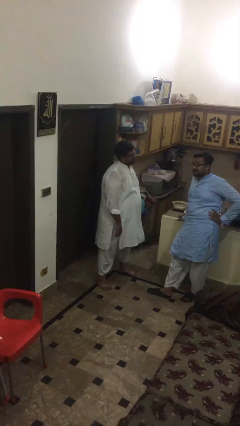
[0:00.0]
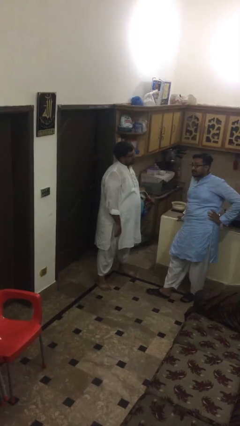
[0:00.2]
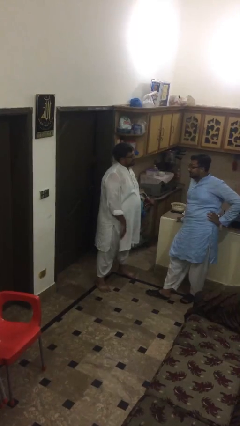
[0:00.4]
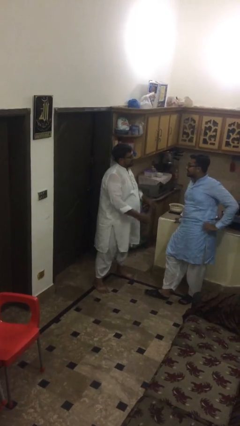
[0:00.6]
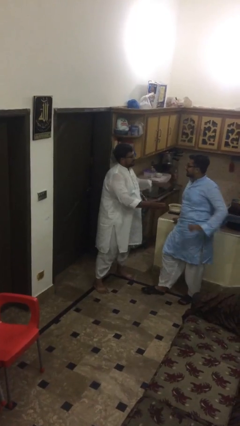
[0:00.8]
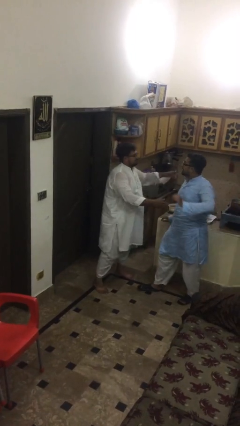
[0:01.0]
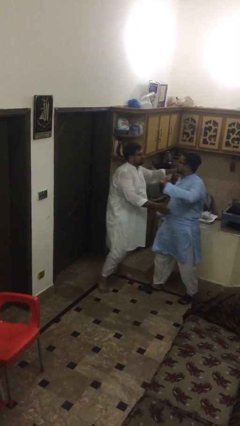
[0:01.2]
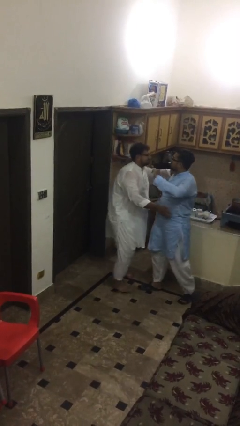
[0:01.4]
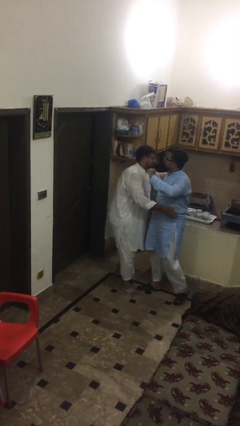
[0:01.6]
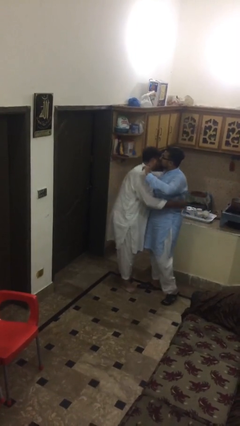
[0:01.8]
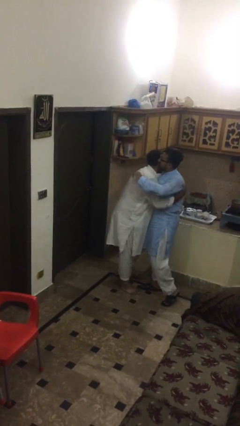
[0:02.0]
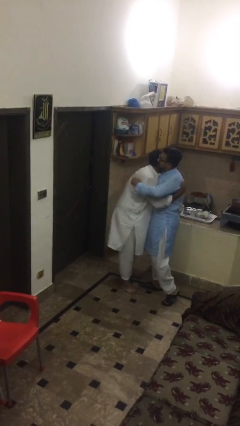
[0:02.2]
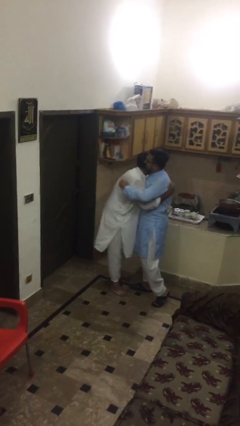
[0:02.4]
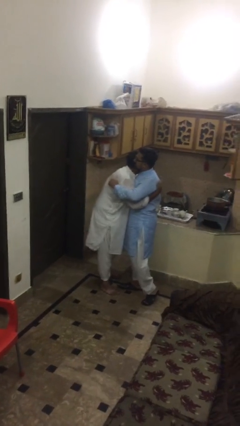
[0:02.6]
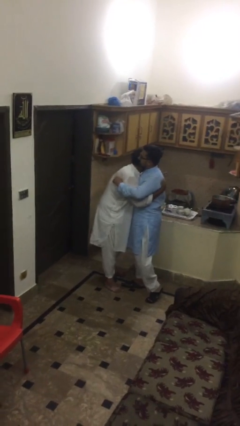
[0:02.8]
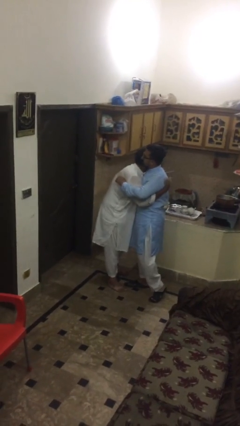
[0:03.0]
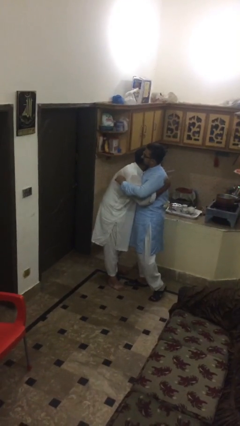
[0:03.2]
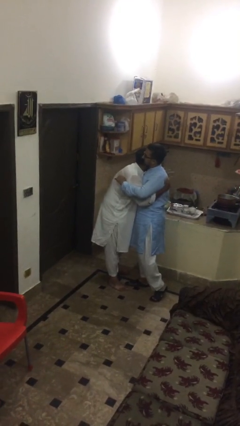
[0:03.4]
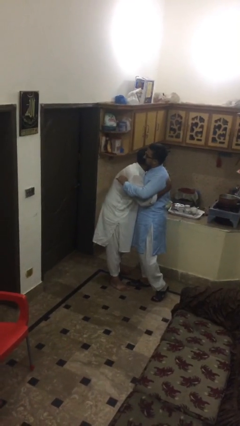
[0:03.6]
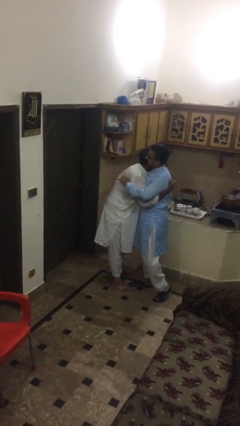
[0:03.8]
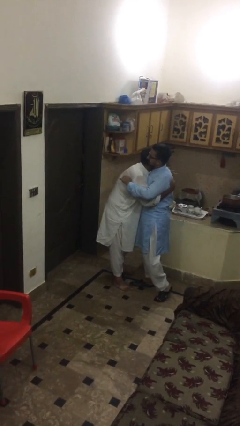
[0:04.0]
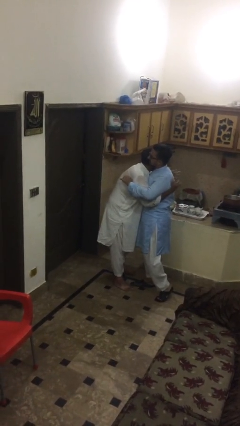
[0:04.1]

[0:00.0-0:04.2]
person embraces person

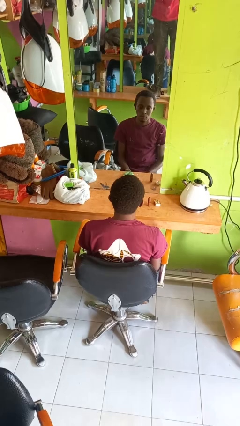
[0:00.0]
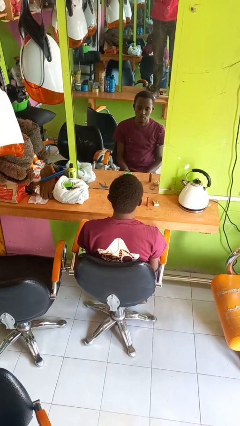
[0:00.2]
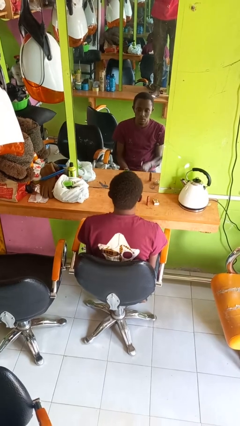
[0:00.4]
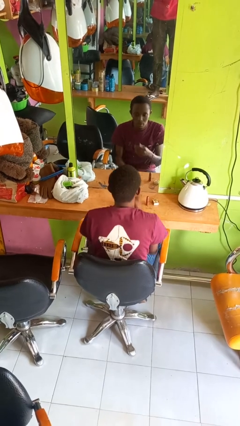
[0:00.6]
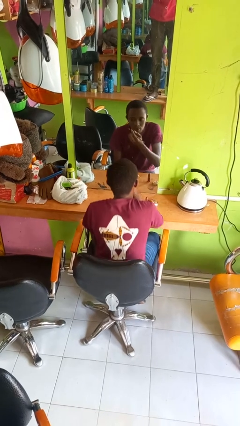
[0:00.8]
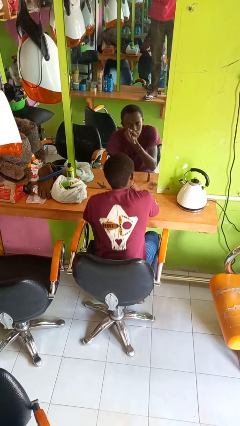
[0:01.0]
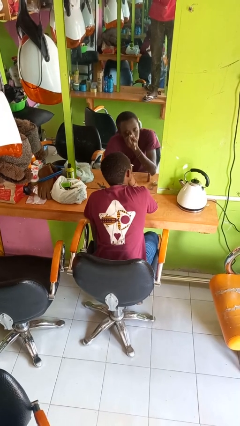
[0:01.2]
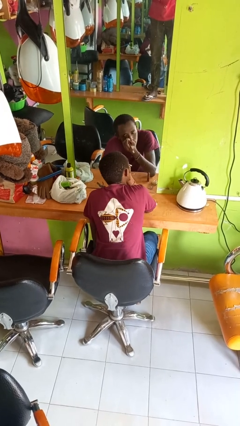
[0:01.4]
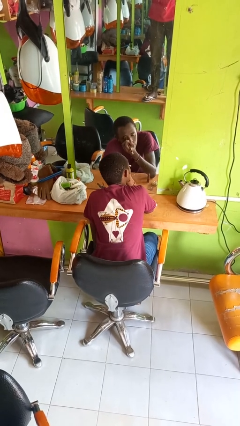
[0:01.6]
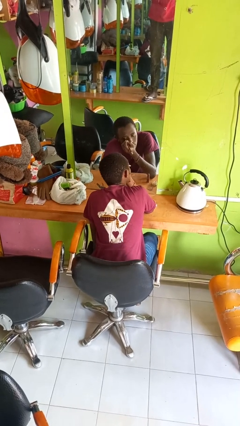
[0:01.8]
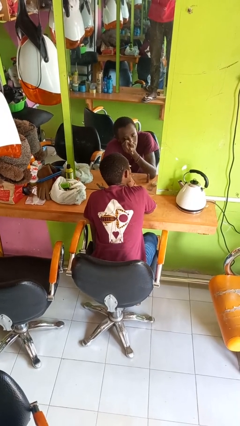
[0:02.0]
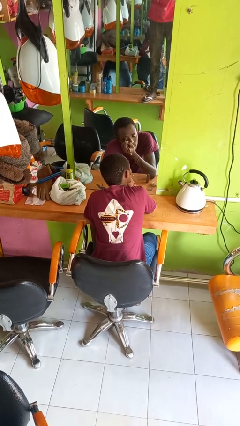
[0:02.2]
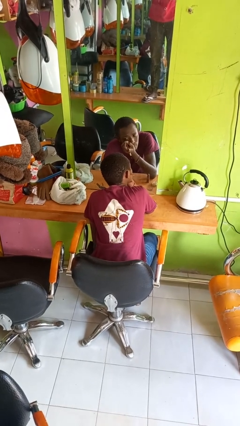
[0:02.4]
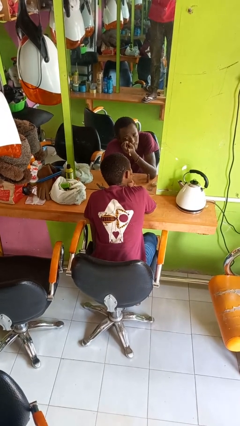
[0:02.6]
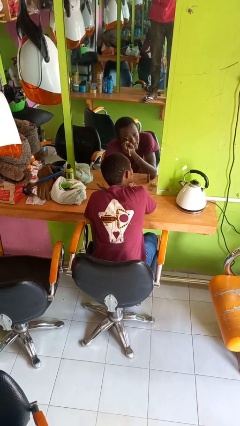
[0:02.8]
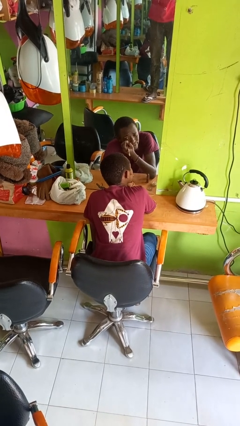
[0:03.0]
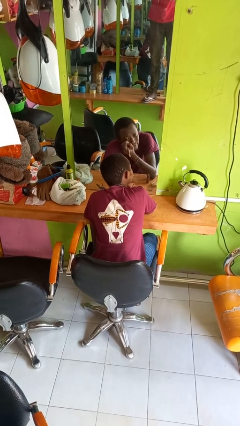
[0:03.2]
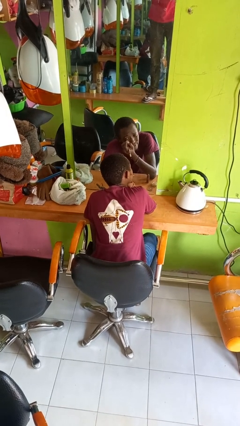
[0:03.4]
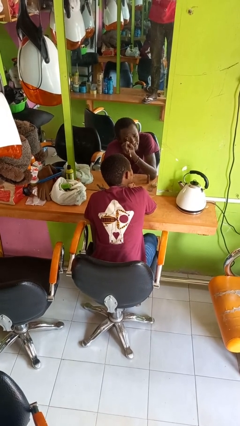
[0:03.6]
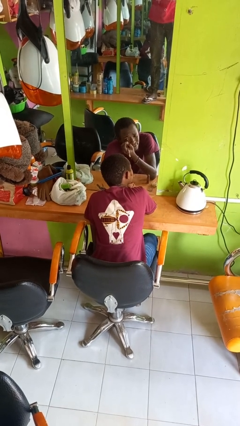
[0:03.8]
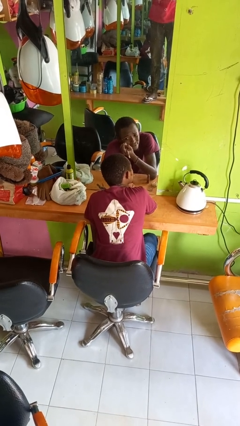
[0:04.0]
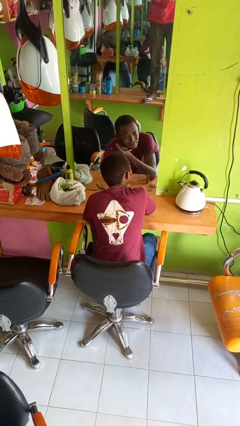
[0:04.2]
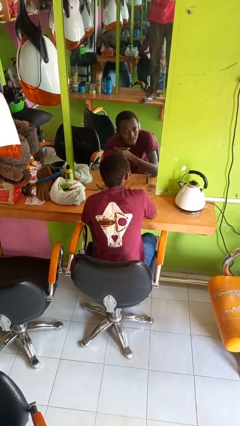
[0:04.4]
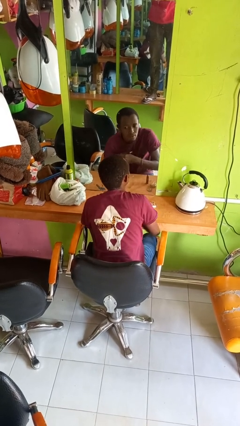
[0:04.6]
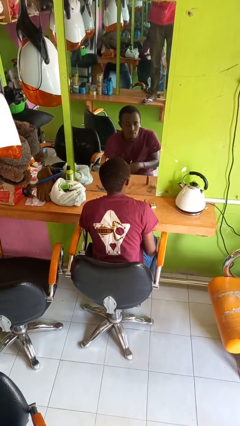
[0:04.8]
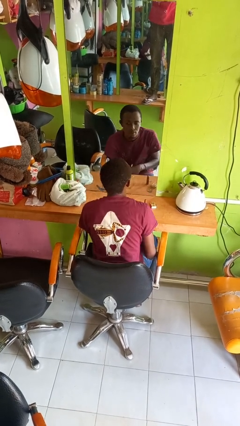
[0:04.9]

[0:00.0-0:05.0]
person applies eye makeup

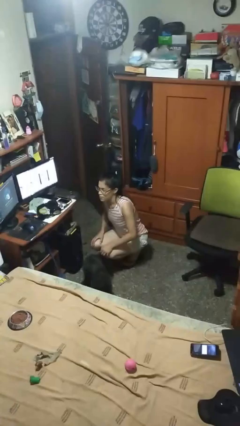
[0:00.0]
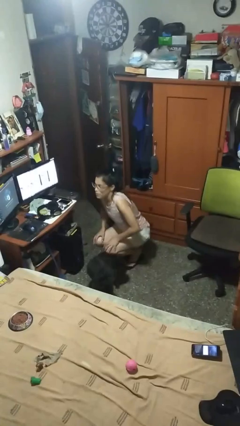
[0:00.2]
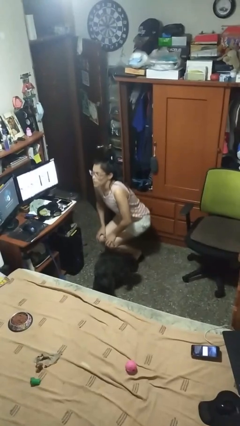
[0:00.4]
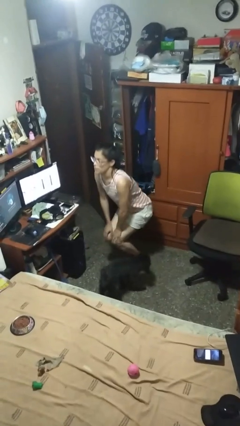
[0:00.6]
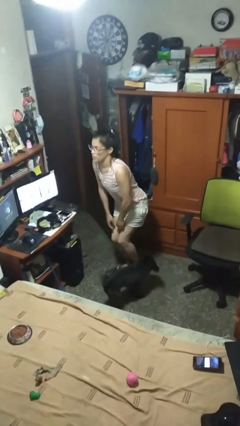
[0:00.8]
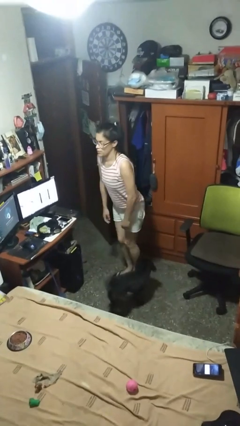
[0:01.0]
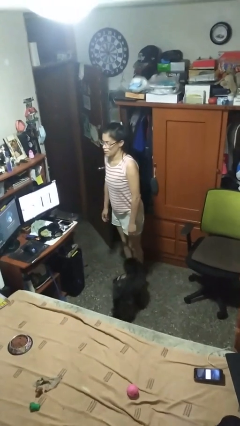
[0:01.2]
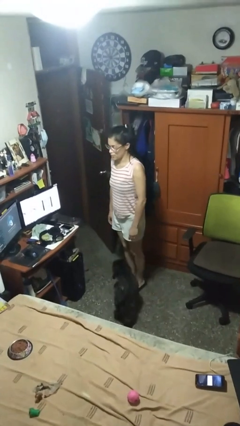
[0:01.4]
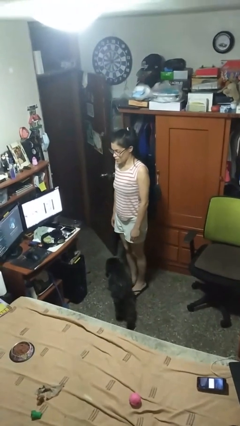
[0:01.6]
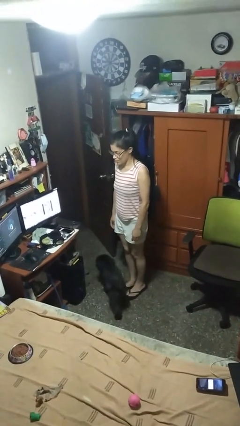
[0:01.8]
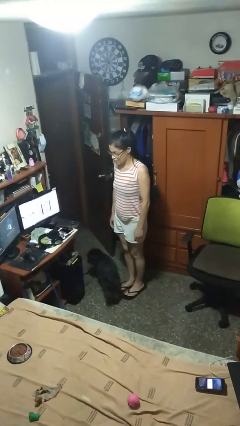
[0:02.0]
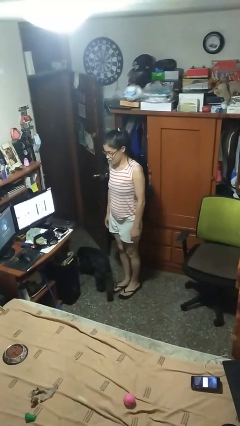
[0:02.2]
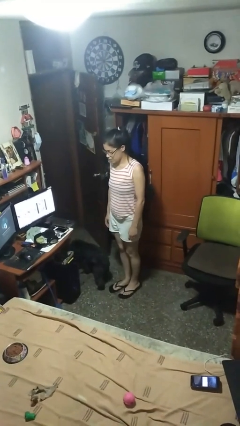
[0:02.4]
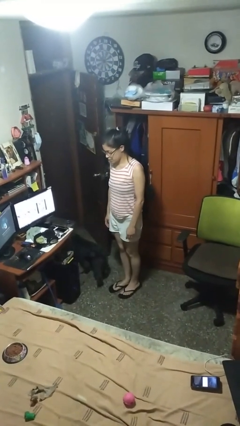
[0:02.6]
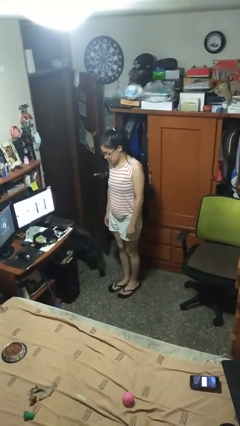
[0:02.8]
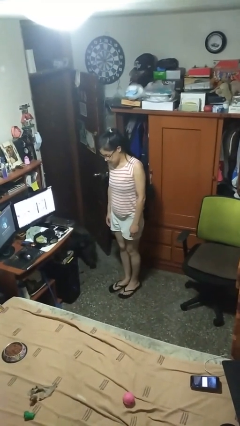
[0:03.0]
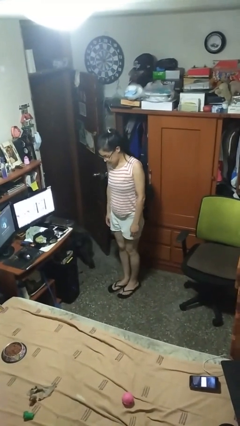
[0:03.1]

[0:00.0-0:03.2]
person stands up

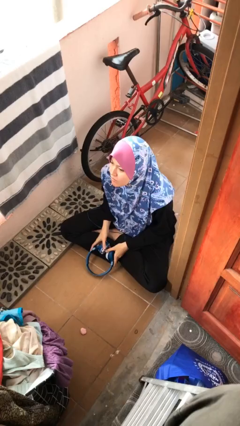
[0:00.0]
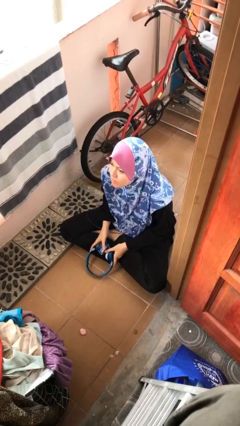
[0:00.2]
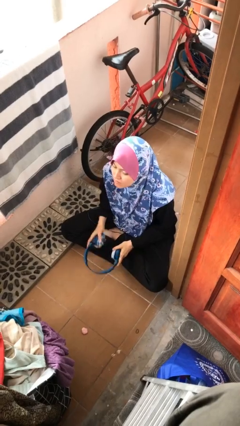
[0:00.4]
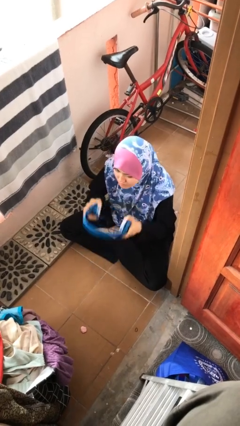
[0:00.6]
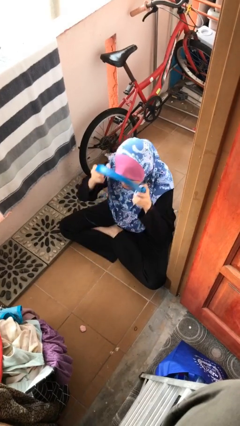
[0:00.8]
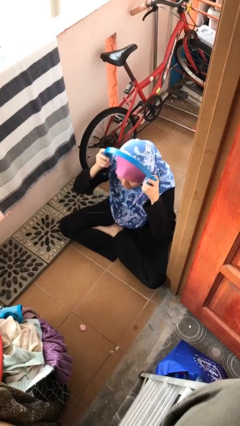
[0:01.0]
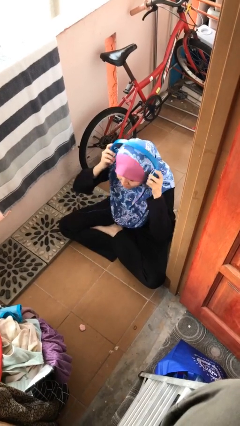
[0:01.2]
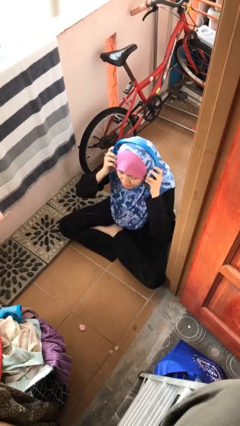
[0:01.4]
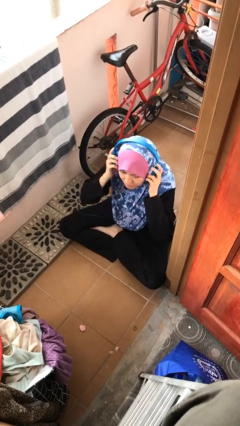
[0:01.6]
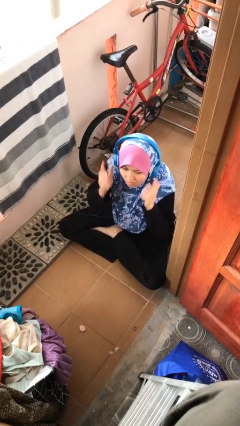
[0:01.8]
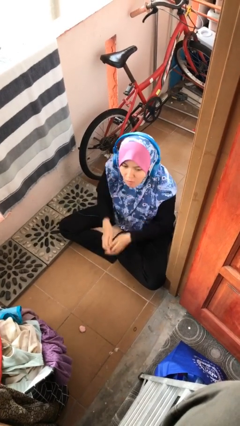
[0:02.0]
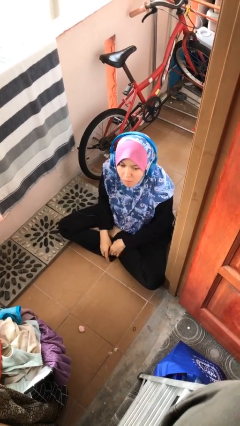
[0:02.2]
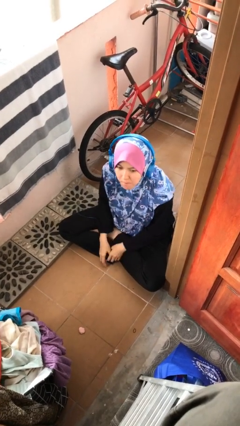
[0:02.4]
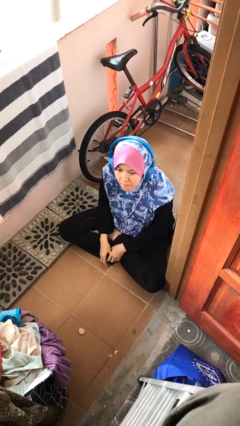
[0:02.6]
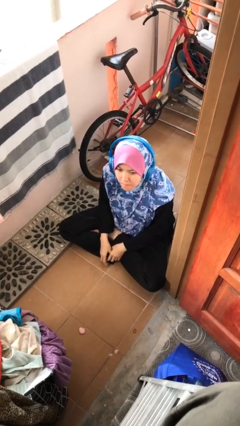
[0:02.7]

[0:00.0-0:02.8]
person puts on headphones

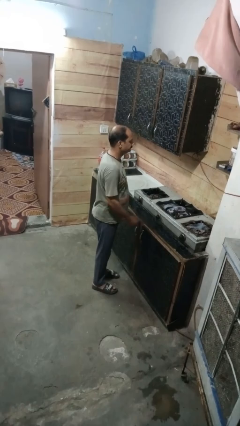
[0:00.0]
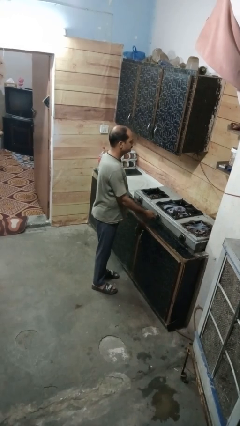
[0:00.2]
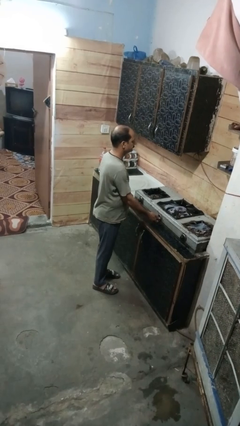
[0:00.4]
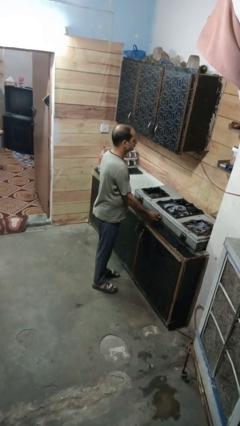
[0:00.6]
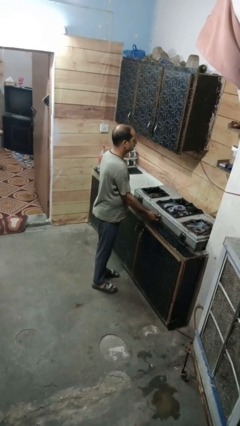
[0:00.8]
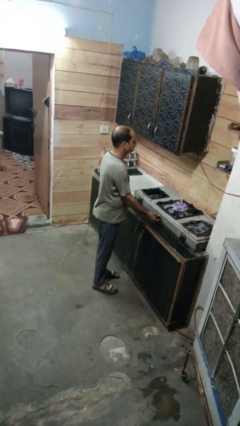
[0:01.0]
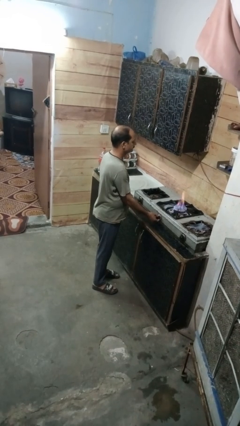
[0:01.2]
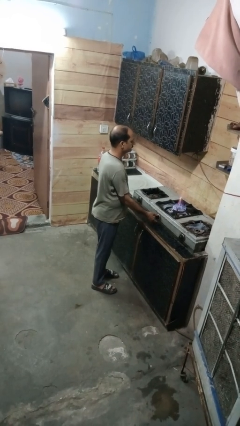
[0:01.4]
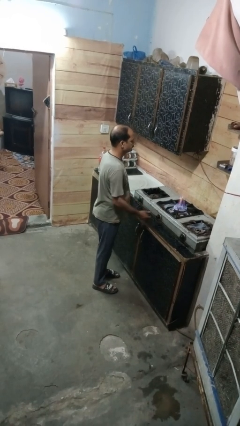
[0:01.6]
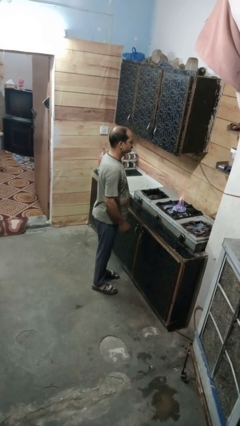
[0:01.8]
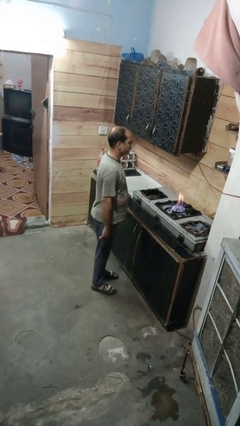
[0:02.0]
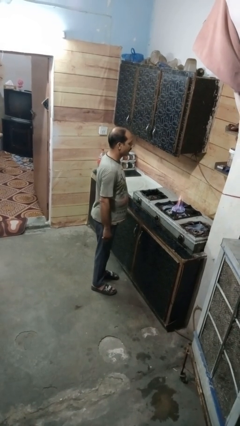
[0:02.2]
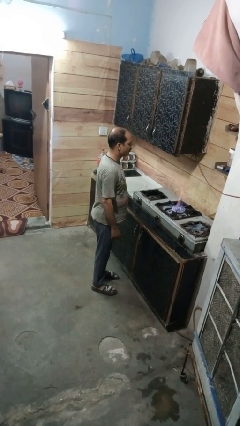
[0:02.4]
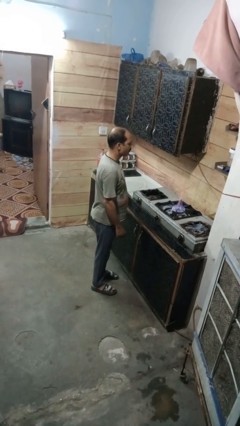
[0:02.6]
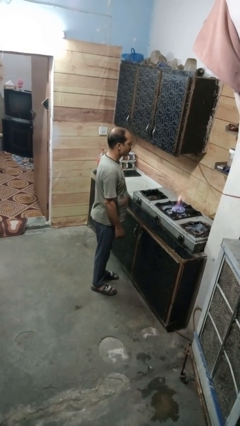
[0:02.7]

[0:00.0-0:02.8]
person turns on stovetop
